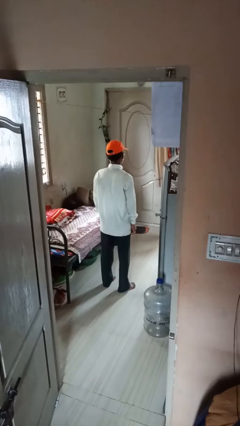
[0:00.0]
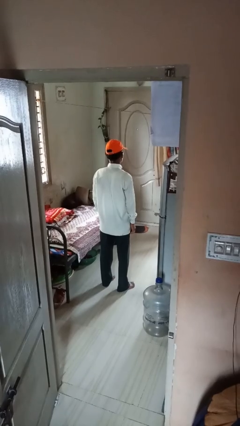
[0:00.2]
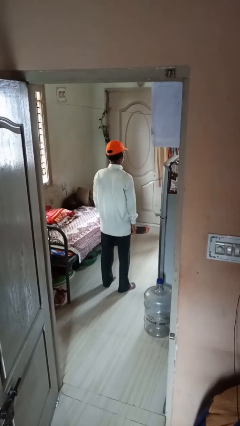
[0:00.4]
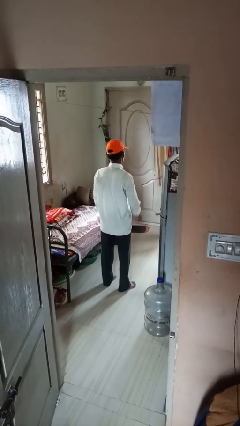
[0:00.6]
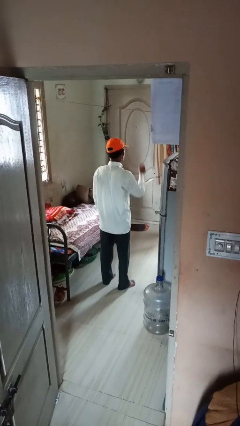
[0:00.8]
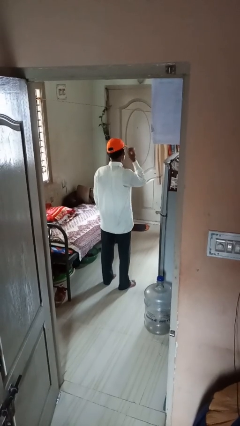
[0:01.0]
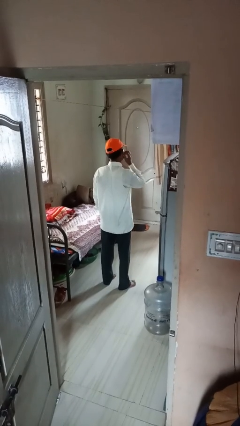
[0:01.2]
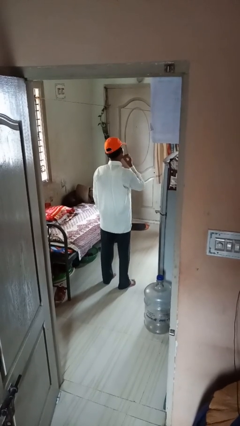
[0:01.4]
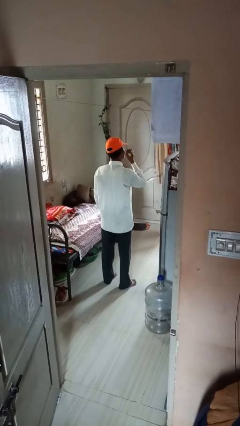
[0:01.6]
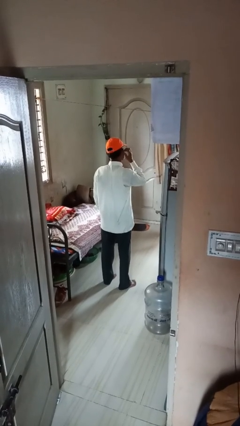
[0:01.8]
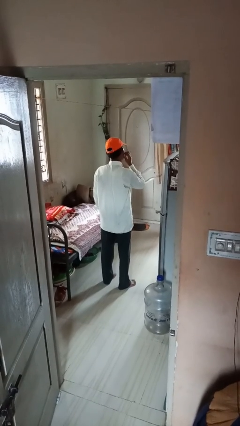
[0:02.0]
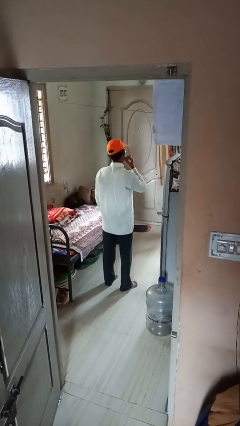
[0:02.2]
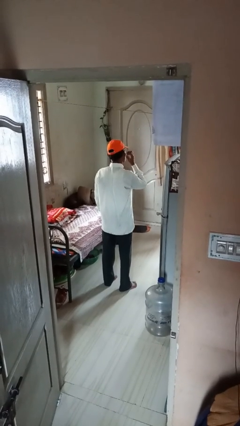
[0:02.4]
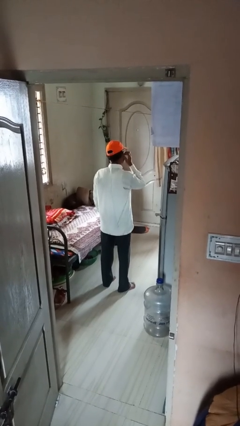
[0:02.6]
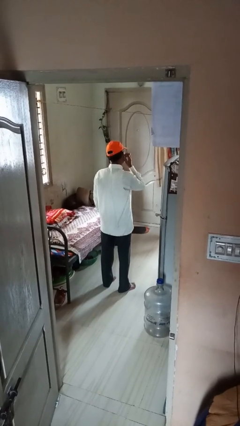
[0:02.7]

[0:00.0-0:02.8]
person scratches face

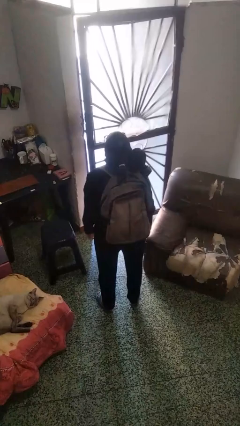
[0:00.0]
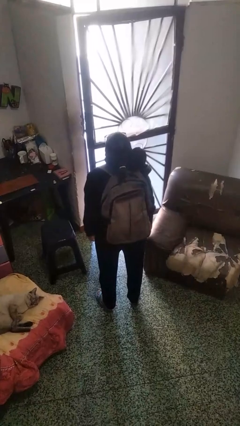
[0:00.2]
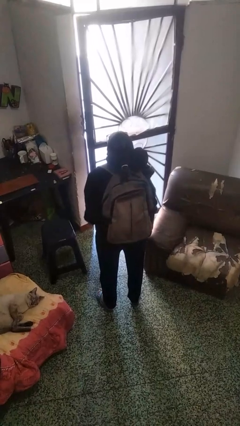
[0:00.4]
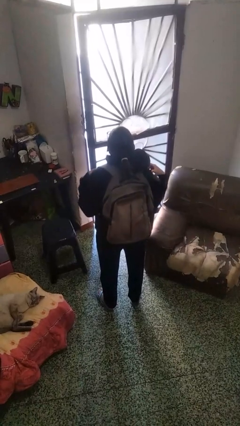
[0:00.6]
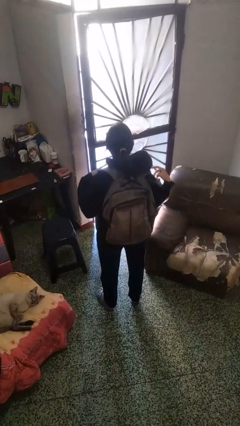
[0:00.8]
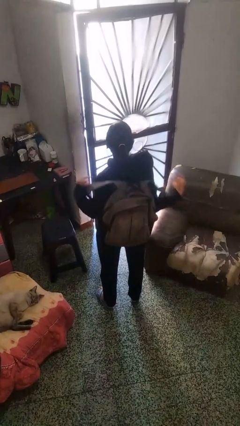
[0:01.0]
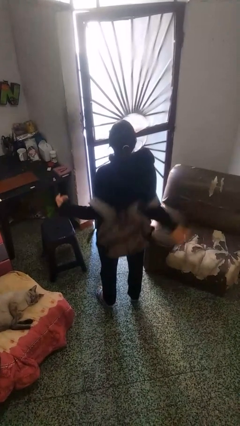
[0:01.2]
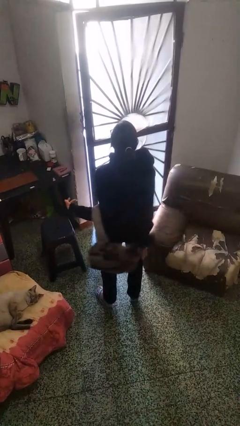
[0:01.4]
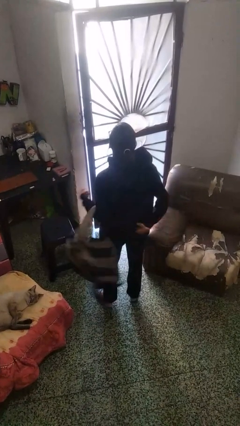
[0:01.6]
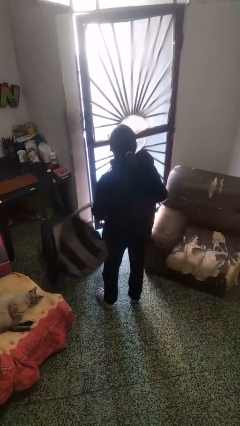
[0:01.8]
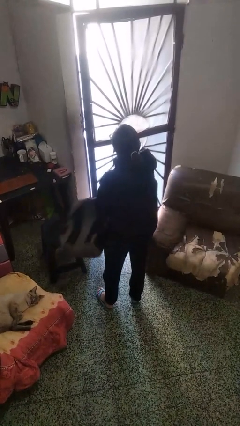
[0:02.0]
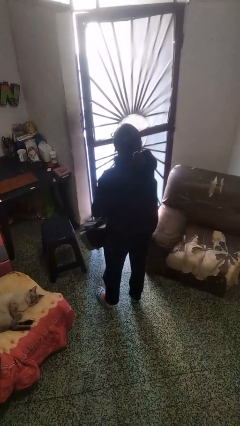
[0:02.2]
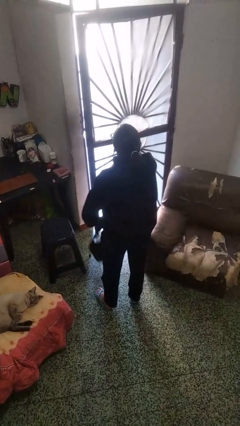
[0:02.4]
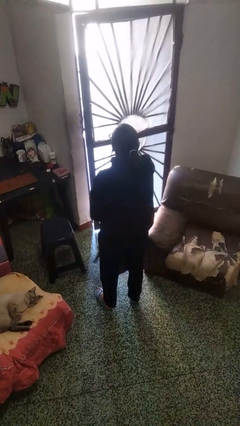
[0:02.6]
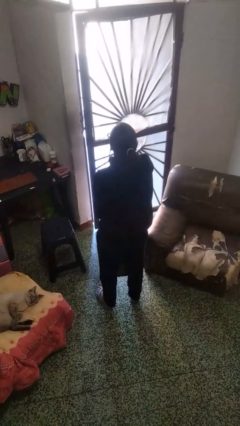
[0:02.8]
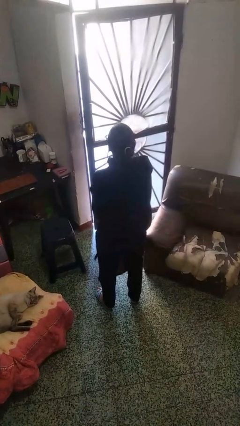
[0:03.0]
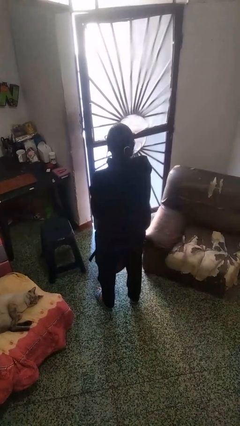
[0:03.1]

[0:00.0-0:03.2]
person takes off backpack

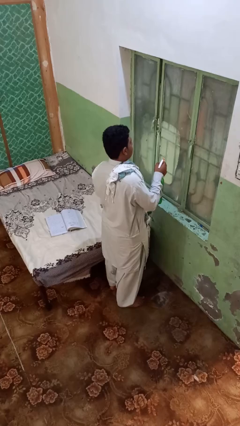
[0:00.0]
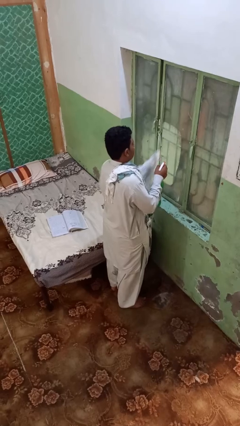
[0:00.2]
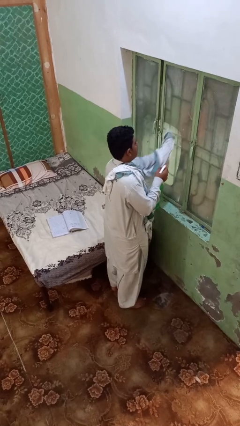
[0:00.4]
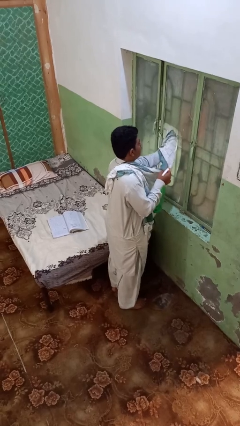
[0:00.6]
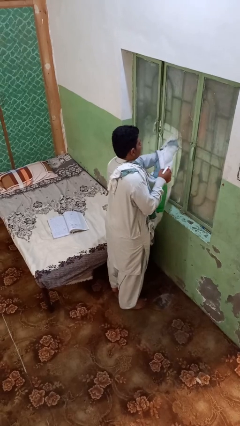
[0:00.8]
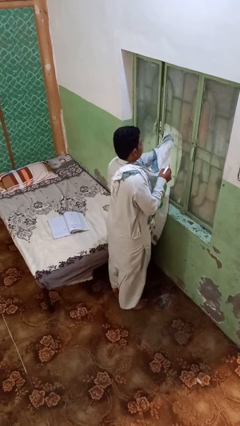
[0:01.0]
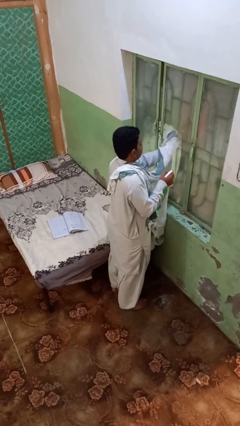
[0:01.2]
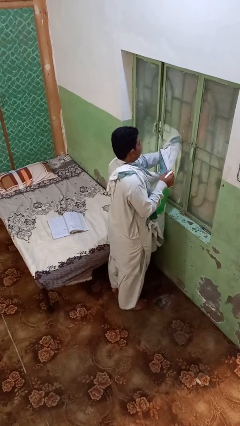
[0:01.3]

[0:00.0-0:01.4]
person washes window

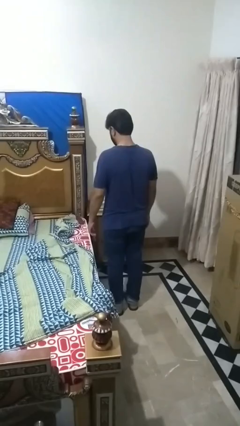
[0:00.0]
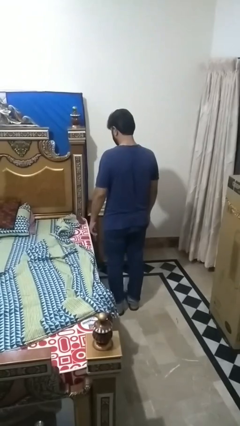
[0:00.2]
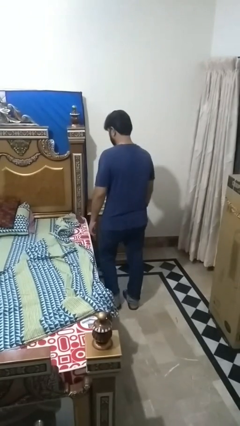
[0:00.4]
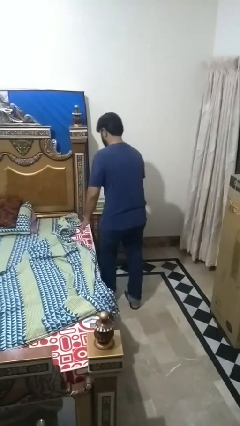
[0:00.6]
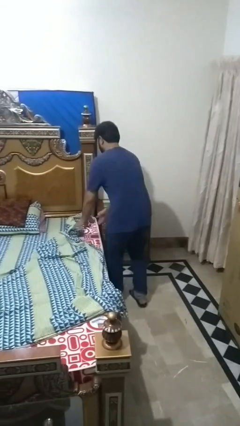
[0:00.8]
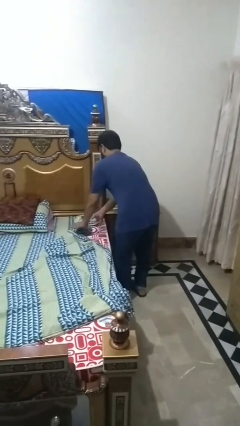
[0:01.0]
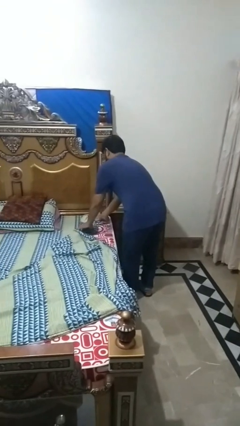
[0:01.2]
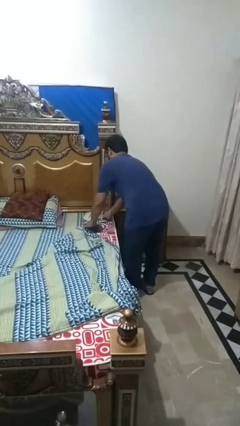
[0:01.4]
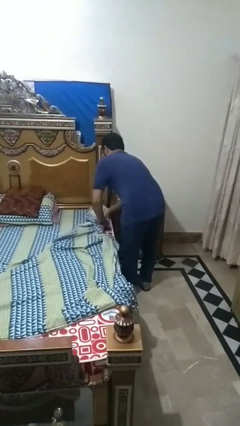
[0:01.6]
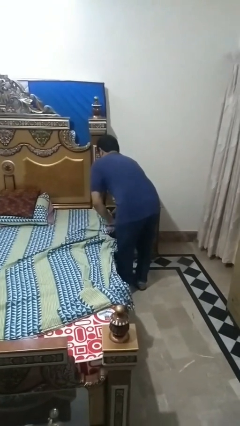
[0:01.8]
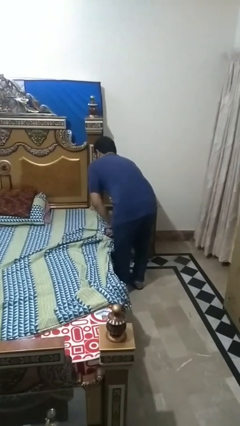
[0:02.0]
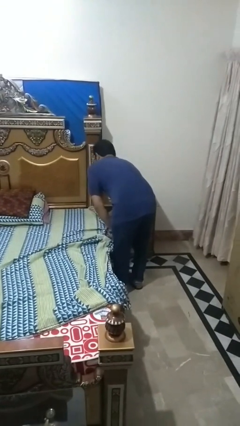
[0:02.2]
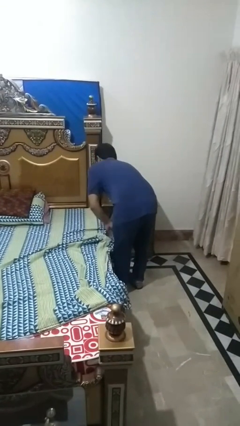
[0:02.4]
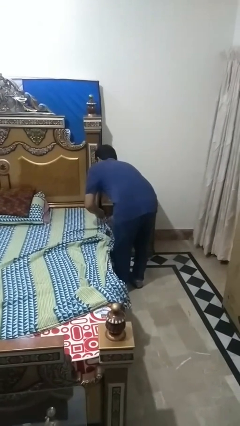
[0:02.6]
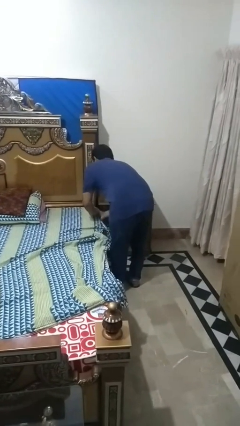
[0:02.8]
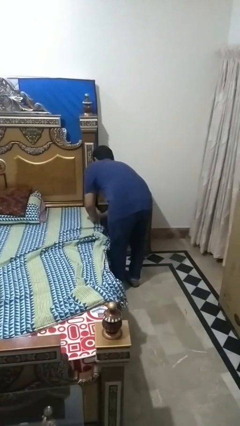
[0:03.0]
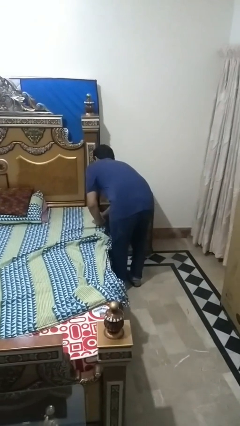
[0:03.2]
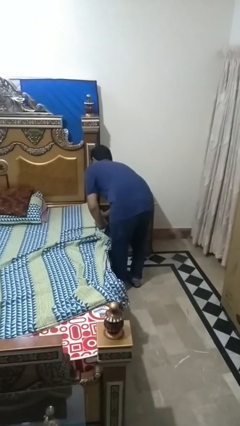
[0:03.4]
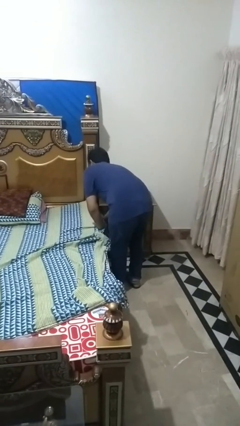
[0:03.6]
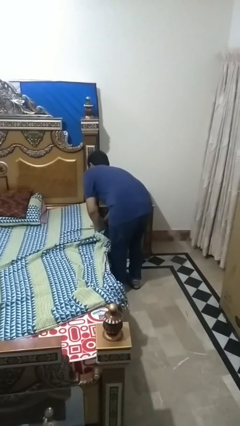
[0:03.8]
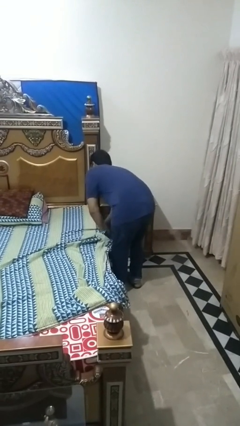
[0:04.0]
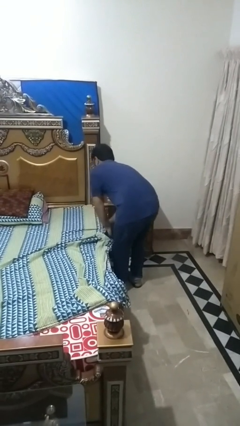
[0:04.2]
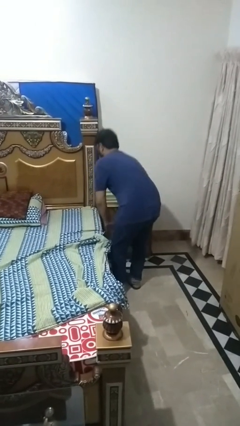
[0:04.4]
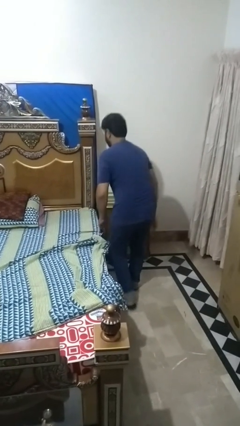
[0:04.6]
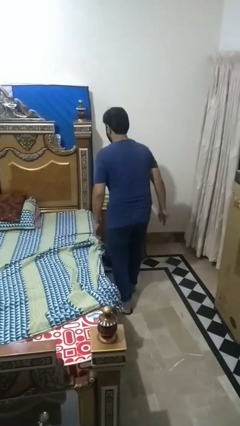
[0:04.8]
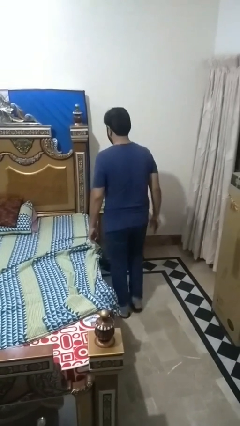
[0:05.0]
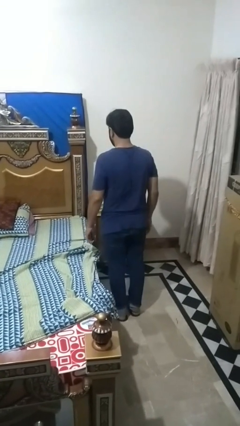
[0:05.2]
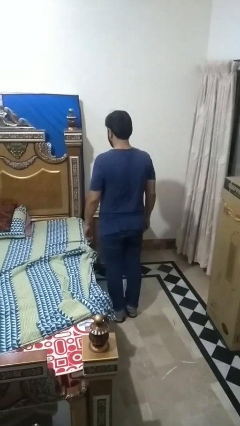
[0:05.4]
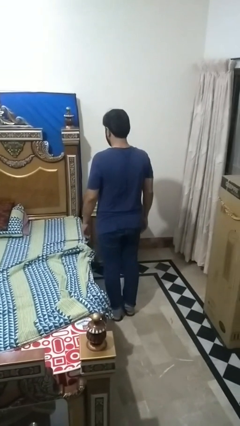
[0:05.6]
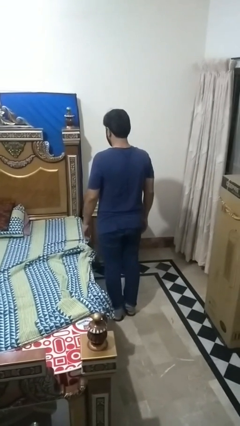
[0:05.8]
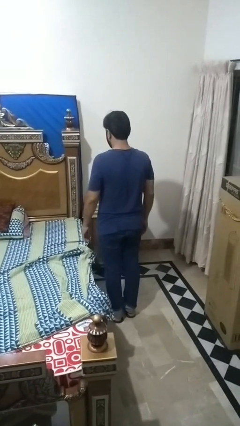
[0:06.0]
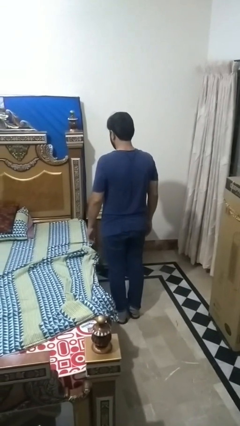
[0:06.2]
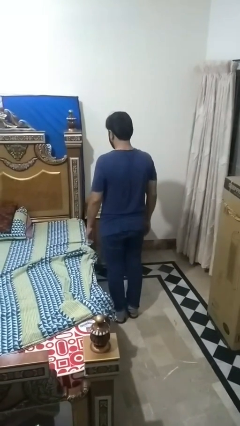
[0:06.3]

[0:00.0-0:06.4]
person makes bed

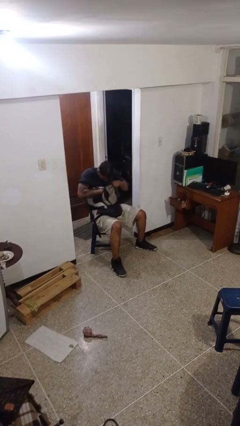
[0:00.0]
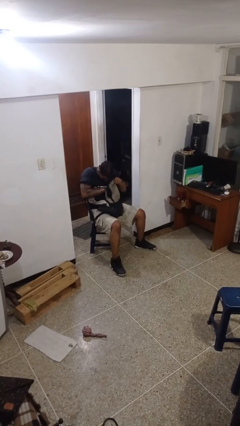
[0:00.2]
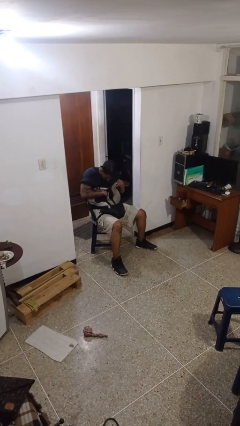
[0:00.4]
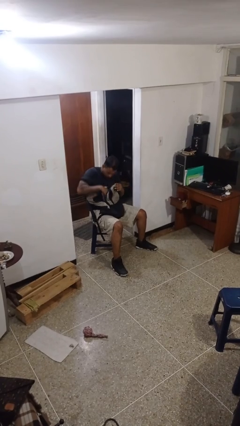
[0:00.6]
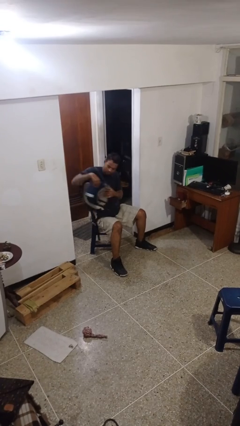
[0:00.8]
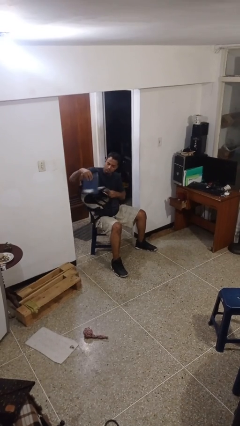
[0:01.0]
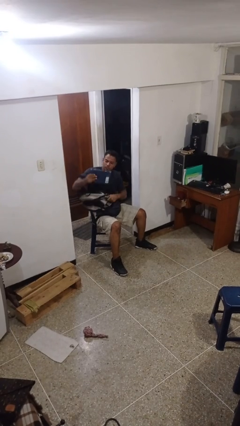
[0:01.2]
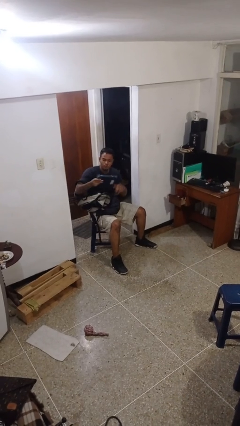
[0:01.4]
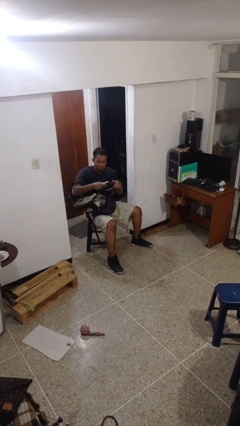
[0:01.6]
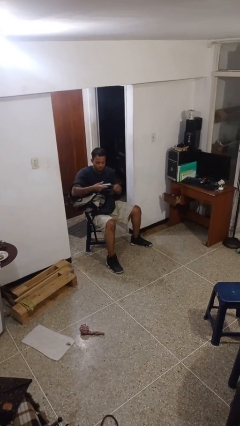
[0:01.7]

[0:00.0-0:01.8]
person takes object from backpack

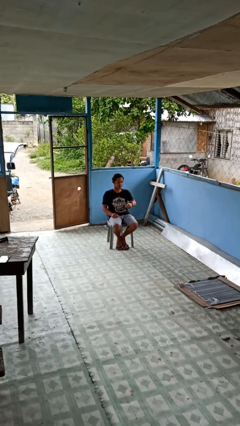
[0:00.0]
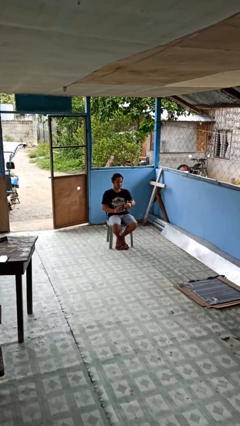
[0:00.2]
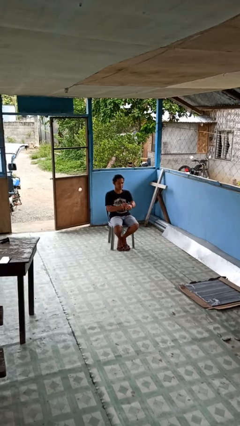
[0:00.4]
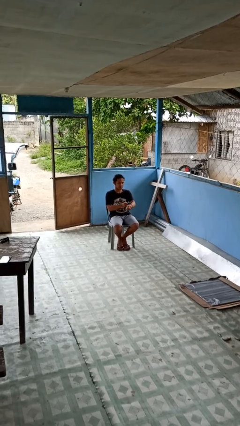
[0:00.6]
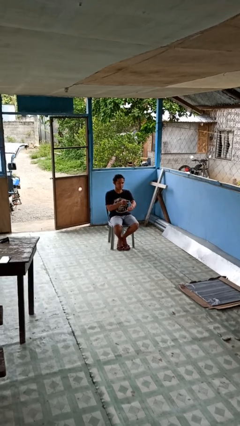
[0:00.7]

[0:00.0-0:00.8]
person takes off wristwatch

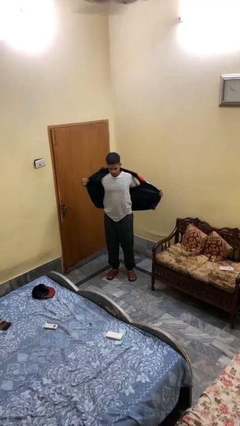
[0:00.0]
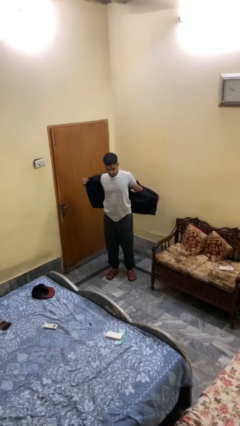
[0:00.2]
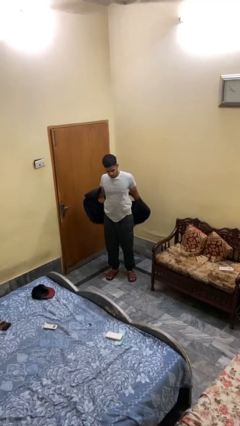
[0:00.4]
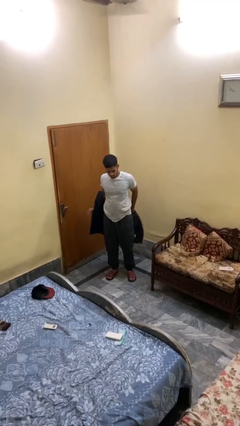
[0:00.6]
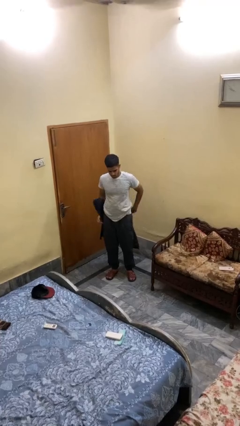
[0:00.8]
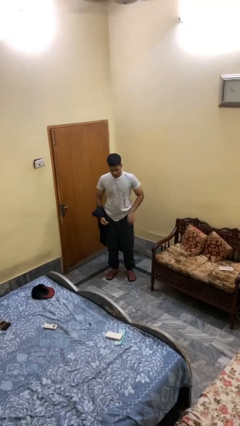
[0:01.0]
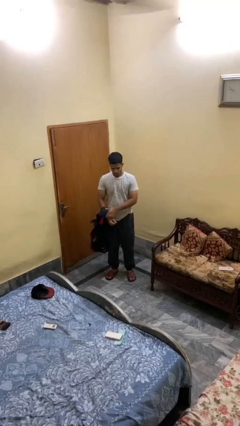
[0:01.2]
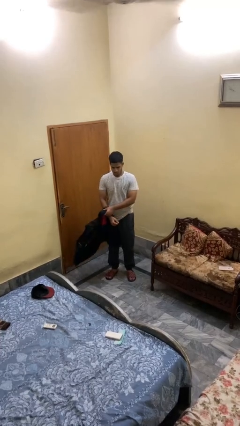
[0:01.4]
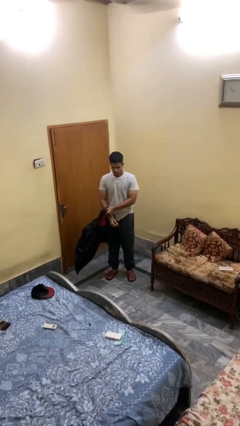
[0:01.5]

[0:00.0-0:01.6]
person takes off jacket
